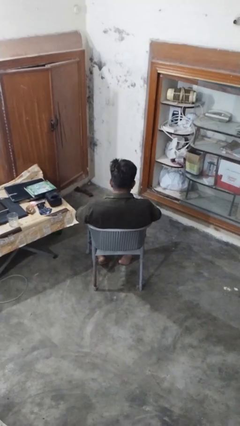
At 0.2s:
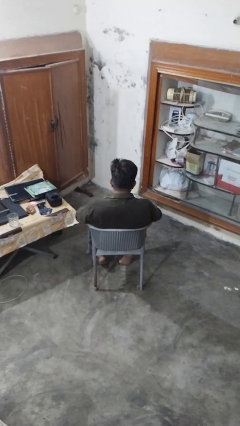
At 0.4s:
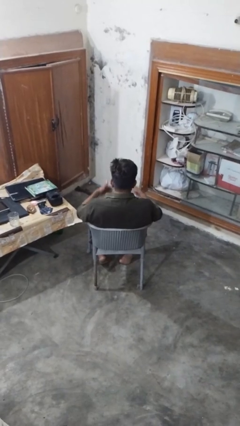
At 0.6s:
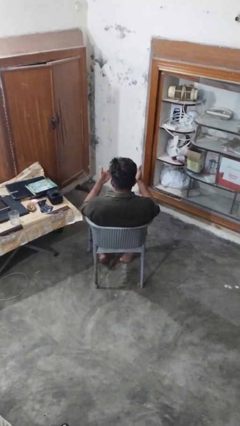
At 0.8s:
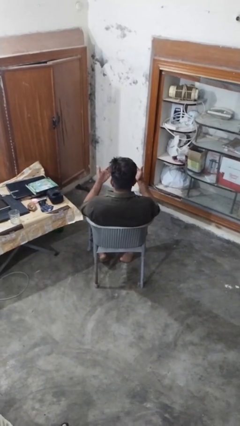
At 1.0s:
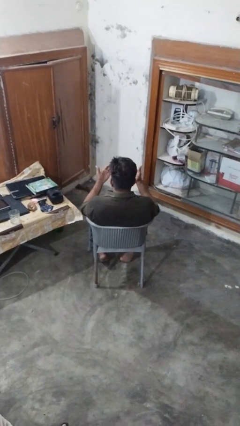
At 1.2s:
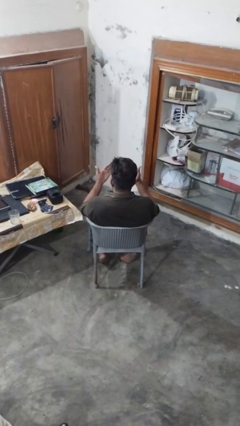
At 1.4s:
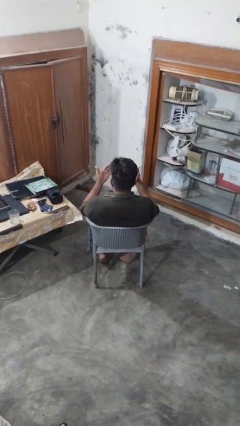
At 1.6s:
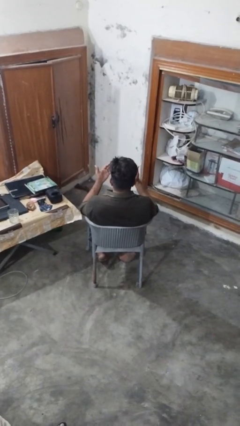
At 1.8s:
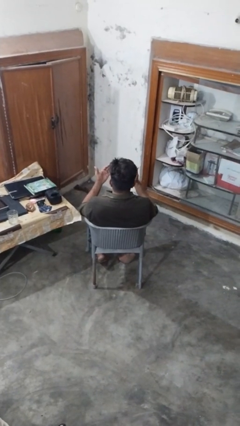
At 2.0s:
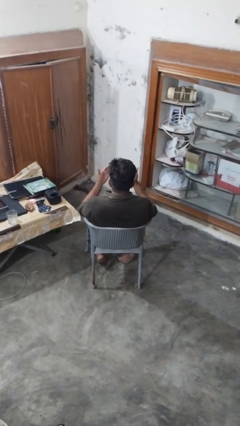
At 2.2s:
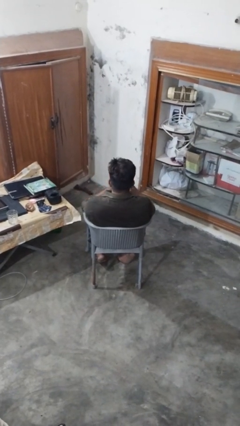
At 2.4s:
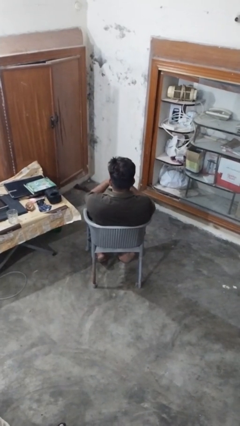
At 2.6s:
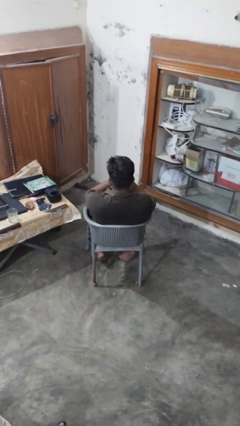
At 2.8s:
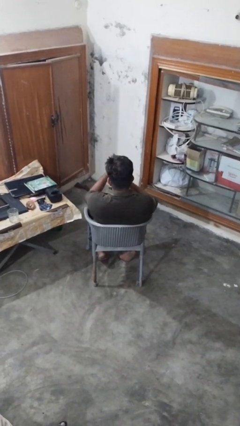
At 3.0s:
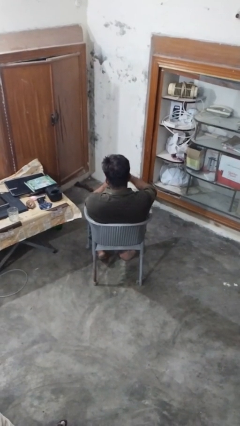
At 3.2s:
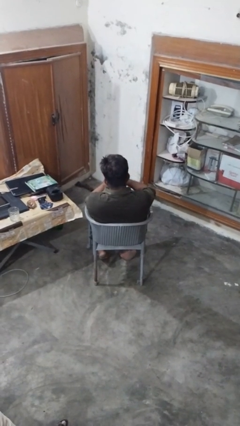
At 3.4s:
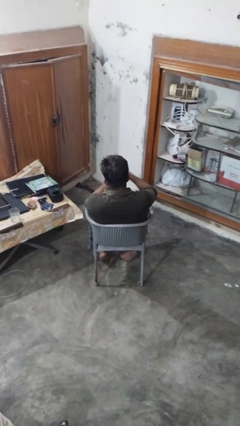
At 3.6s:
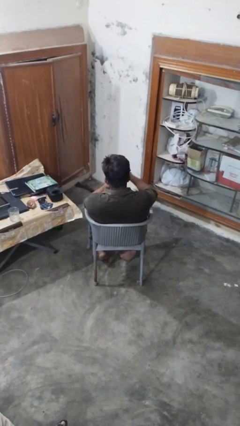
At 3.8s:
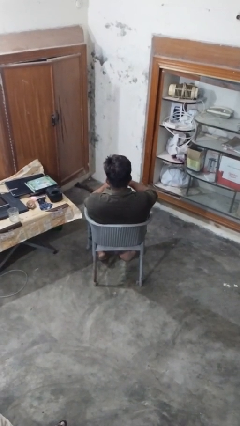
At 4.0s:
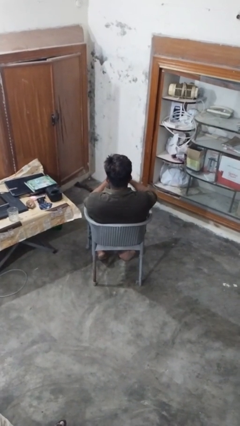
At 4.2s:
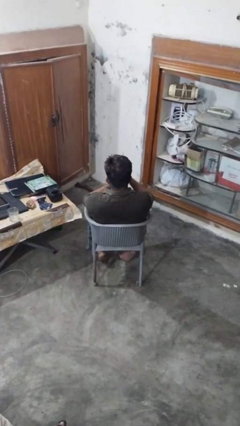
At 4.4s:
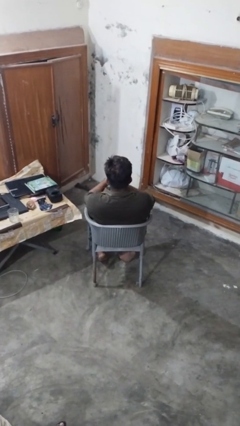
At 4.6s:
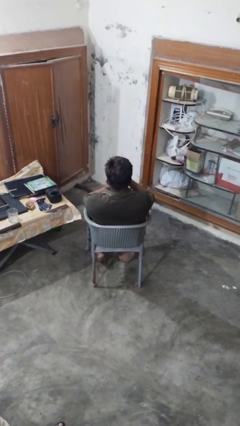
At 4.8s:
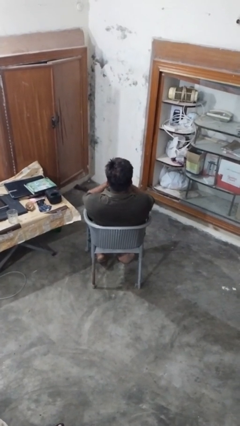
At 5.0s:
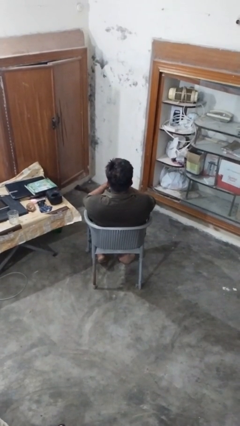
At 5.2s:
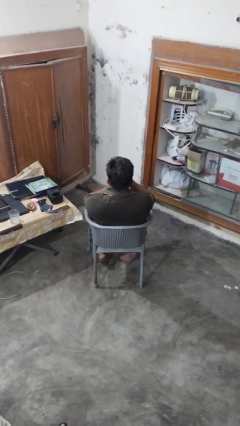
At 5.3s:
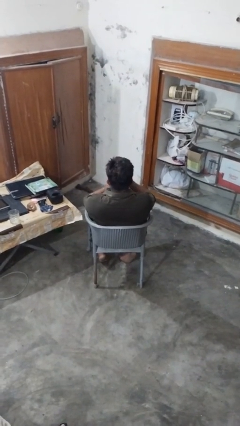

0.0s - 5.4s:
person looks at hands in lap

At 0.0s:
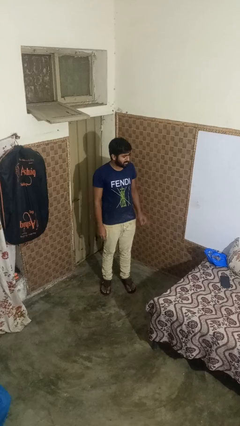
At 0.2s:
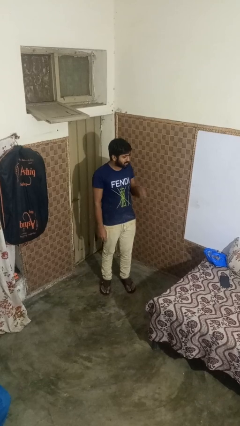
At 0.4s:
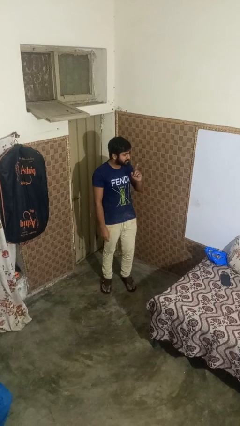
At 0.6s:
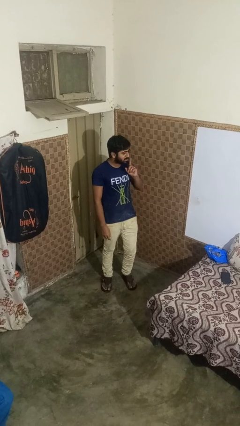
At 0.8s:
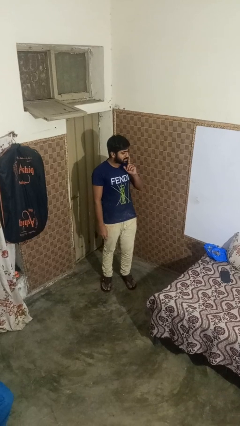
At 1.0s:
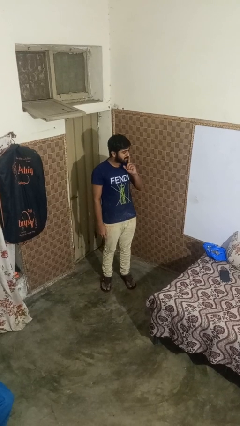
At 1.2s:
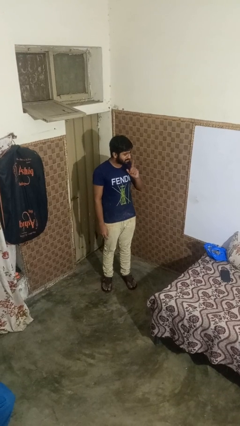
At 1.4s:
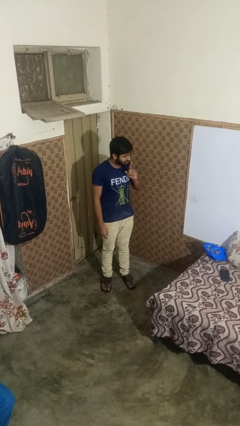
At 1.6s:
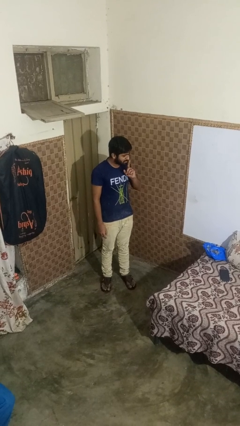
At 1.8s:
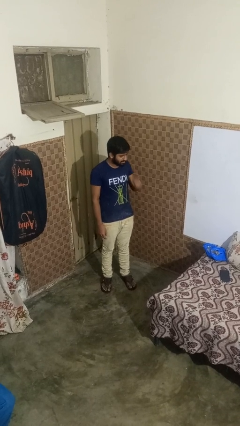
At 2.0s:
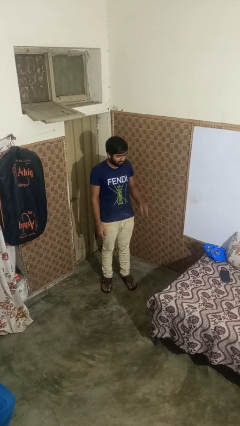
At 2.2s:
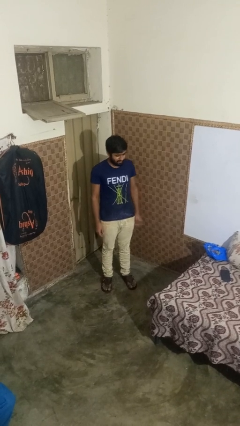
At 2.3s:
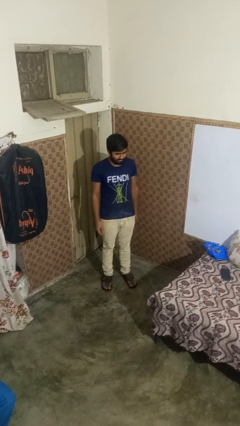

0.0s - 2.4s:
person gestures be quiet

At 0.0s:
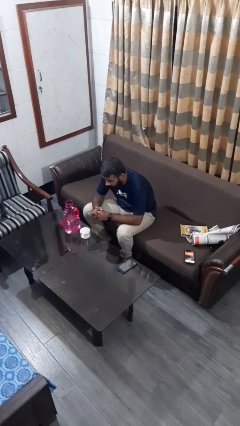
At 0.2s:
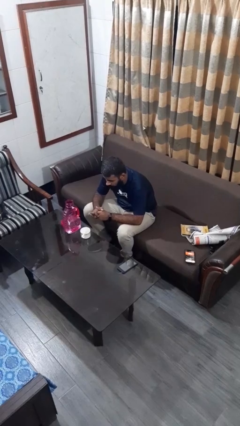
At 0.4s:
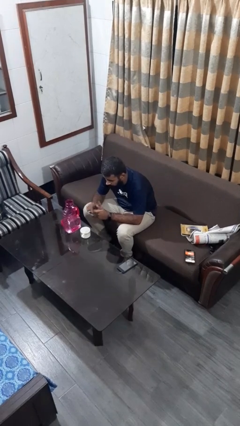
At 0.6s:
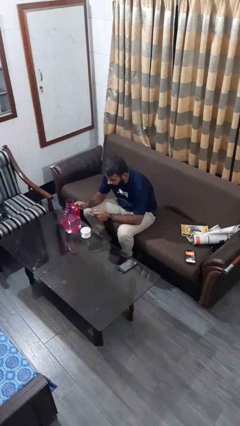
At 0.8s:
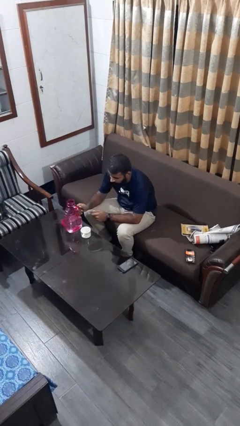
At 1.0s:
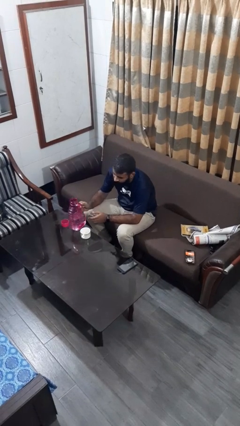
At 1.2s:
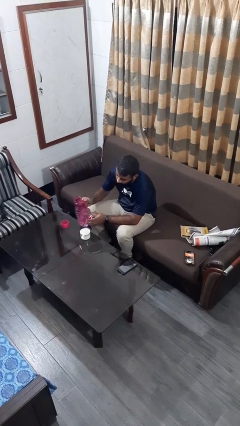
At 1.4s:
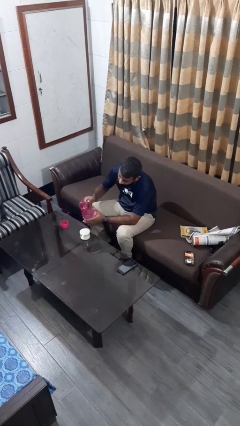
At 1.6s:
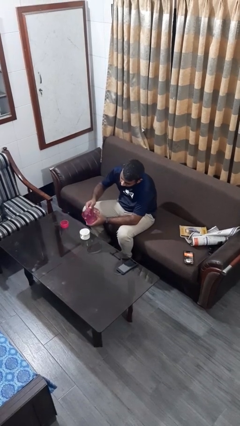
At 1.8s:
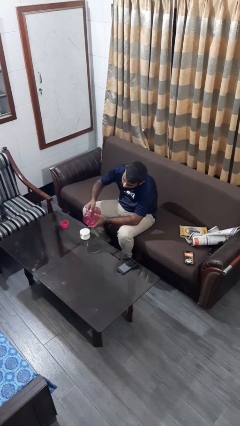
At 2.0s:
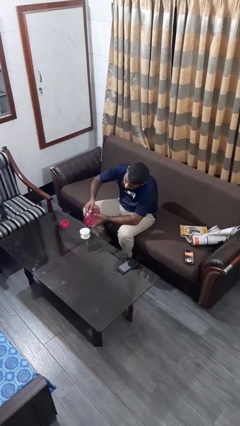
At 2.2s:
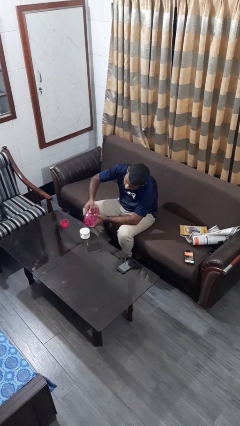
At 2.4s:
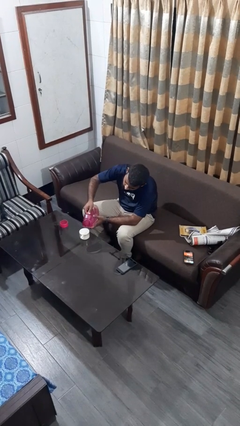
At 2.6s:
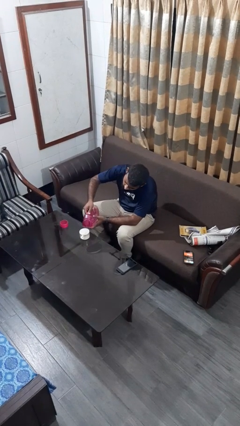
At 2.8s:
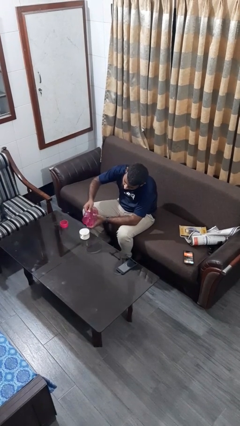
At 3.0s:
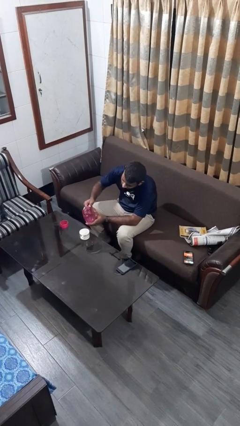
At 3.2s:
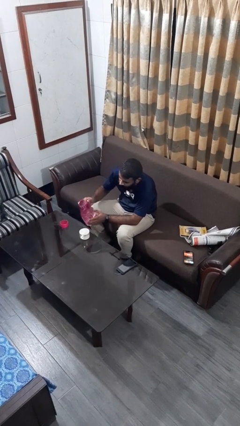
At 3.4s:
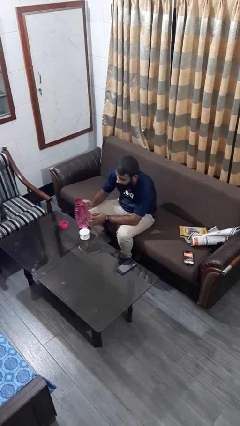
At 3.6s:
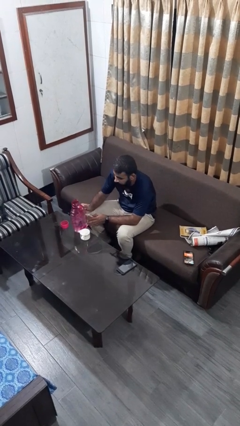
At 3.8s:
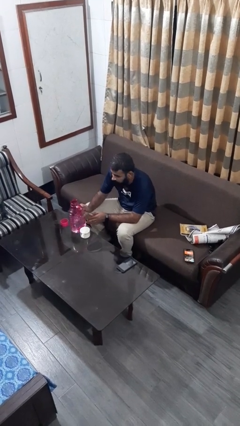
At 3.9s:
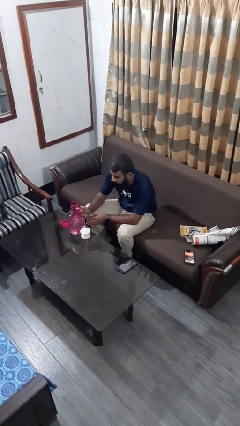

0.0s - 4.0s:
person pours liquid into cup

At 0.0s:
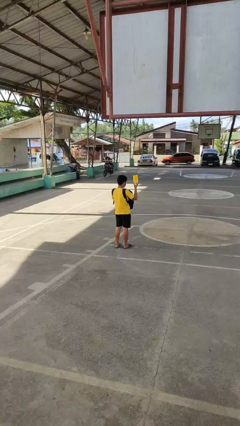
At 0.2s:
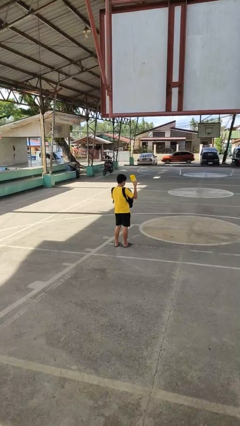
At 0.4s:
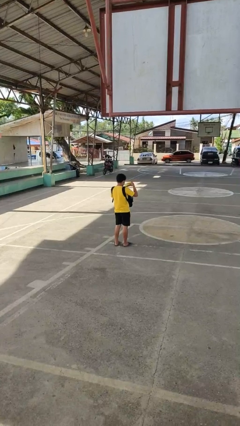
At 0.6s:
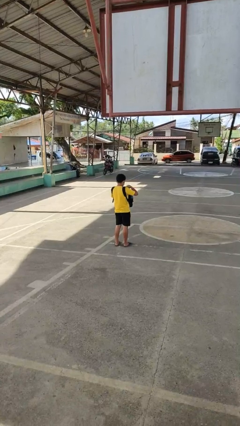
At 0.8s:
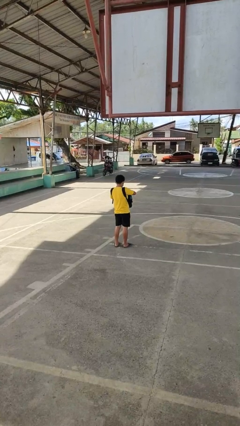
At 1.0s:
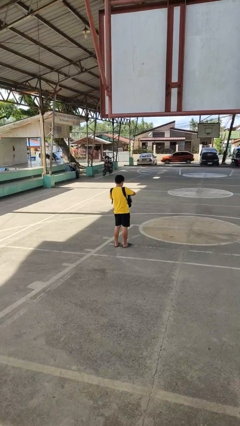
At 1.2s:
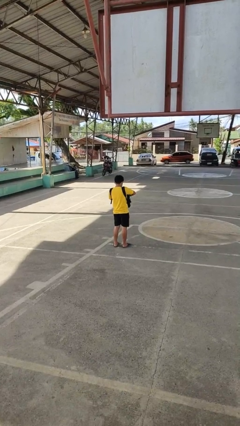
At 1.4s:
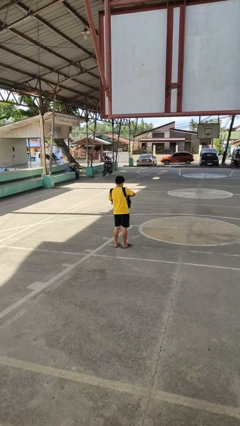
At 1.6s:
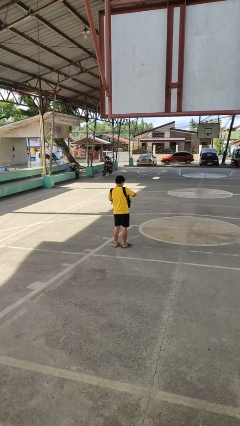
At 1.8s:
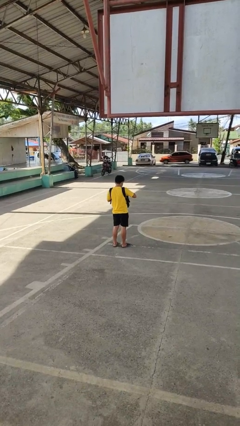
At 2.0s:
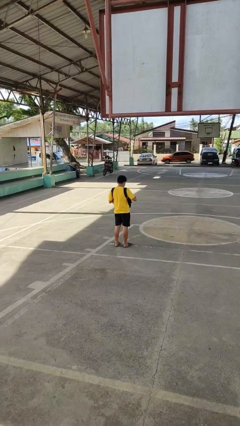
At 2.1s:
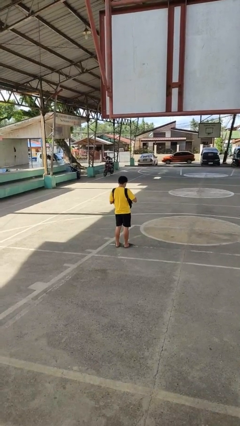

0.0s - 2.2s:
person puts object into backpack

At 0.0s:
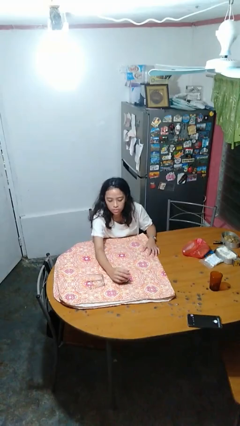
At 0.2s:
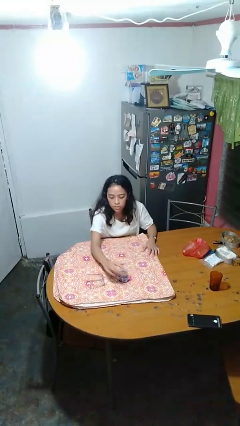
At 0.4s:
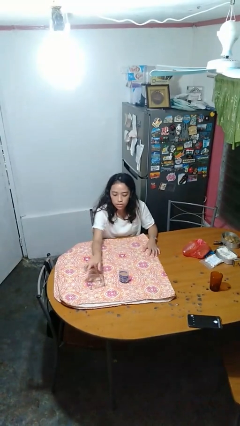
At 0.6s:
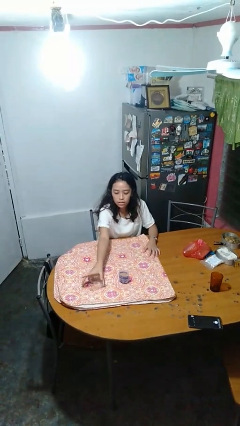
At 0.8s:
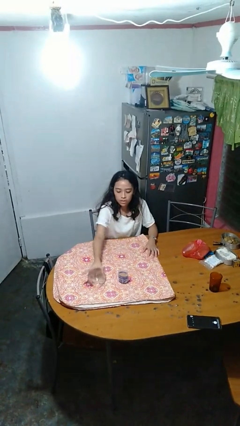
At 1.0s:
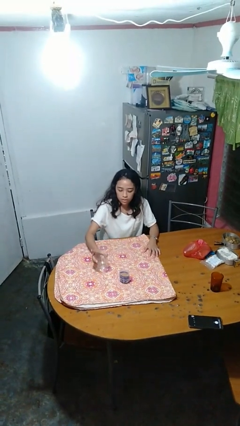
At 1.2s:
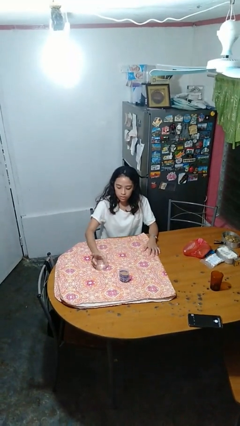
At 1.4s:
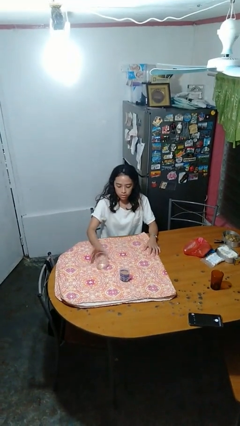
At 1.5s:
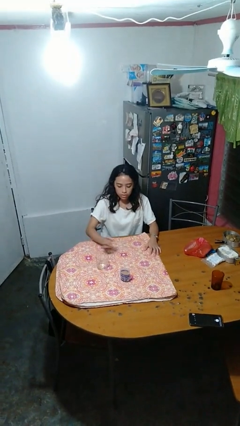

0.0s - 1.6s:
person sets upright glass

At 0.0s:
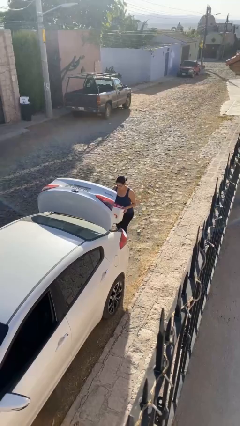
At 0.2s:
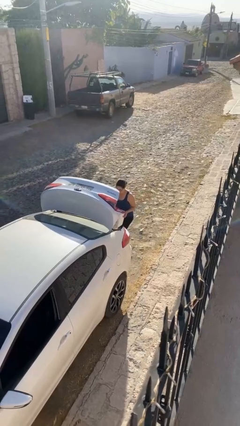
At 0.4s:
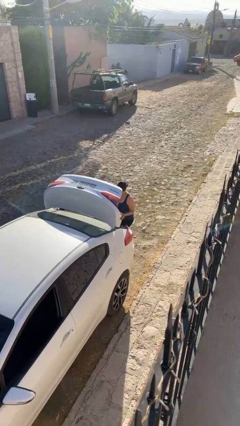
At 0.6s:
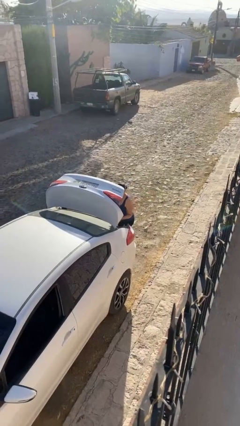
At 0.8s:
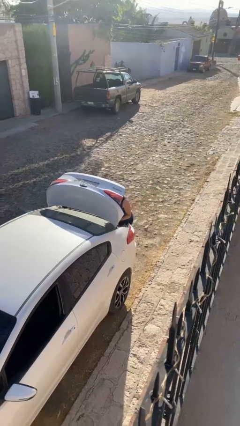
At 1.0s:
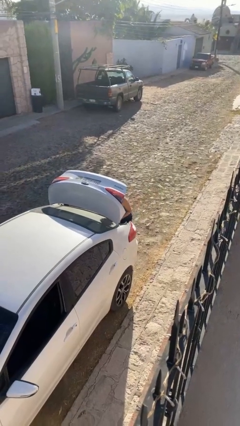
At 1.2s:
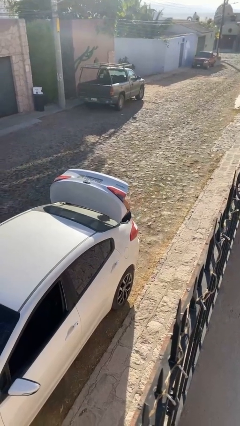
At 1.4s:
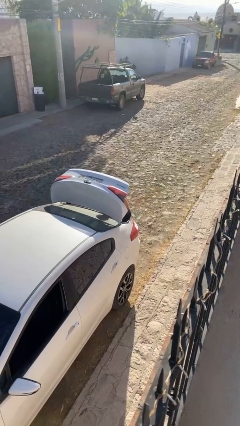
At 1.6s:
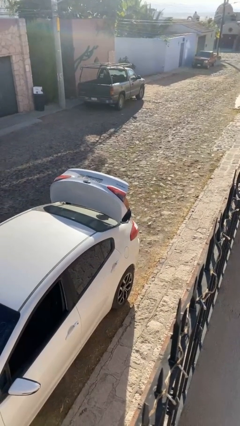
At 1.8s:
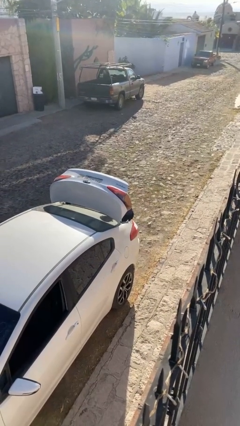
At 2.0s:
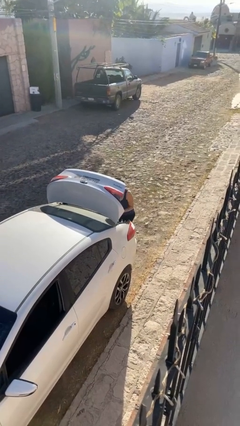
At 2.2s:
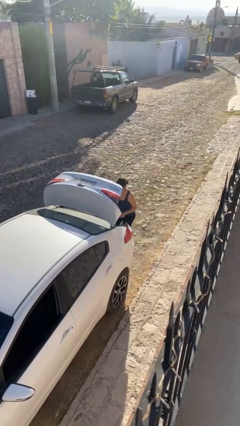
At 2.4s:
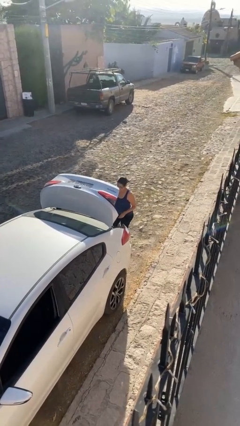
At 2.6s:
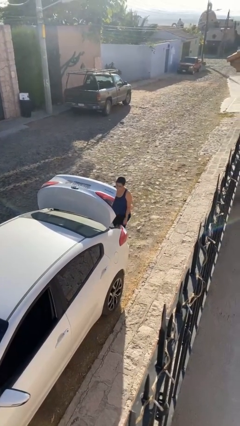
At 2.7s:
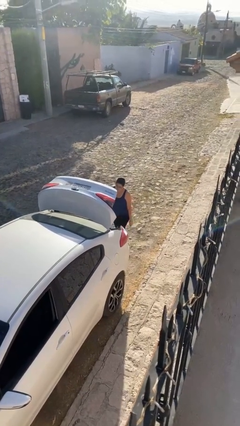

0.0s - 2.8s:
person loads car
